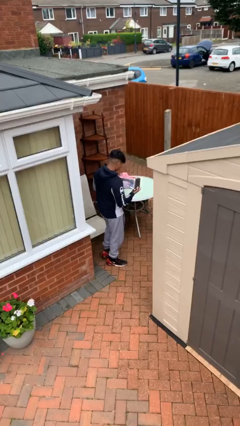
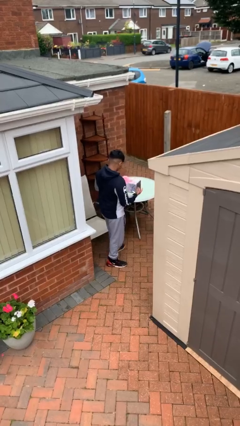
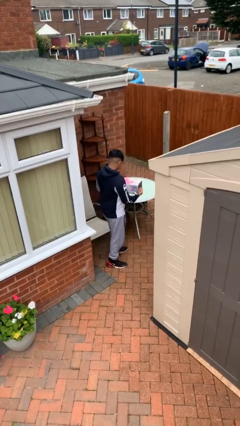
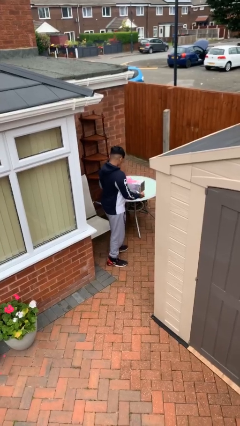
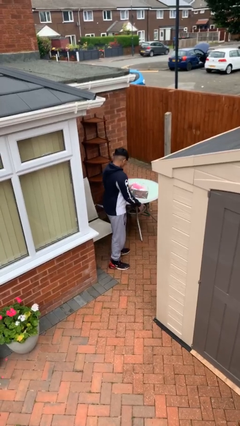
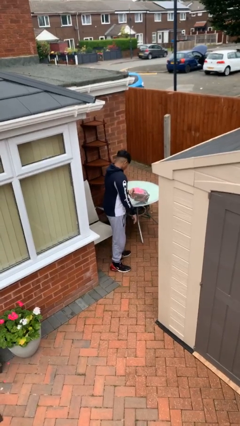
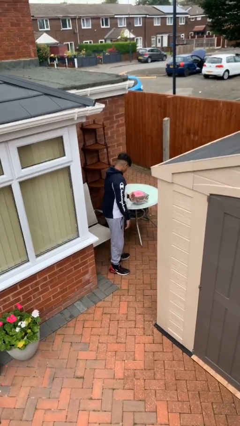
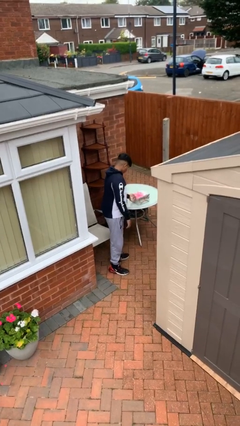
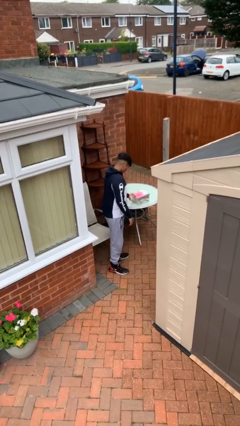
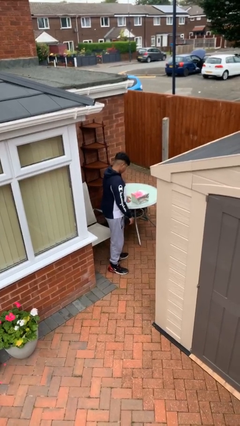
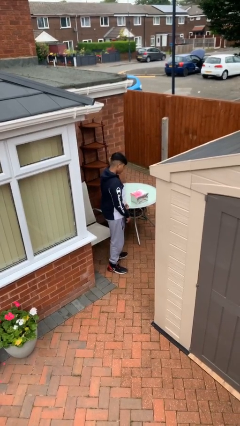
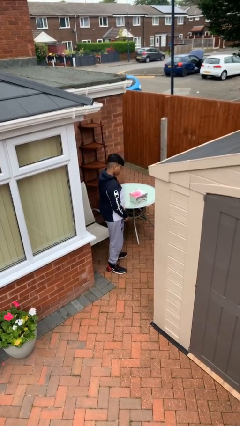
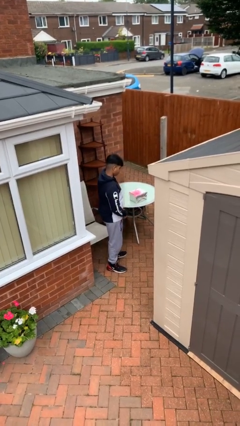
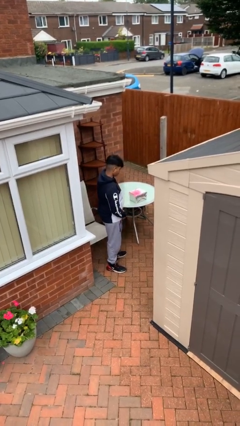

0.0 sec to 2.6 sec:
person puts down object on table

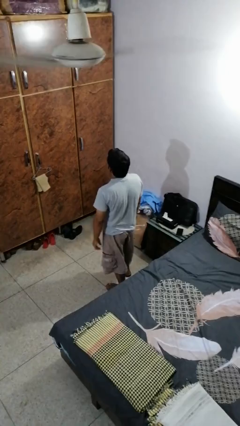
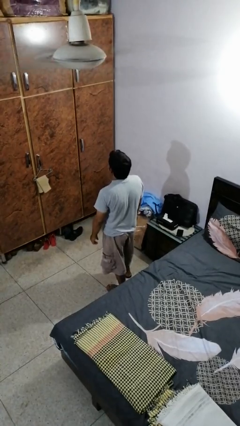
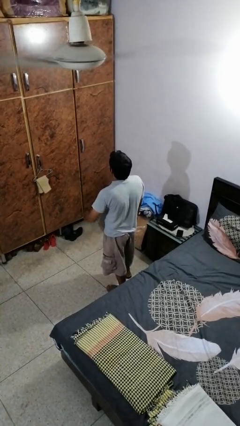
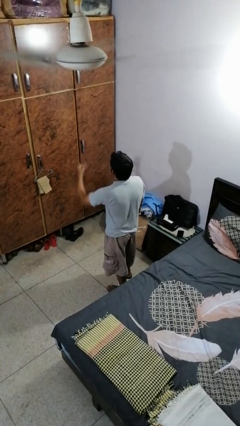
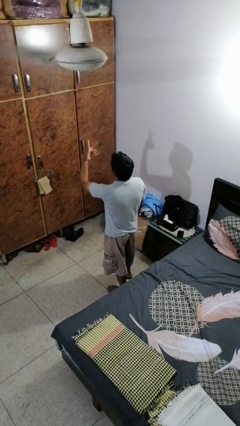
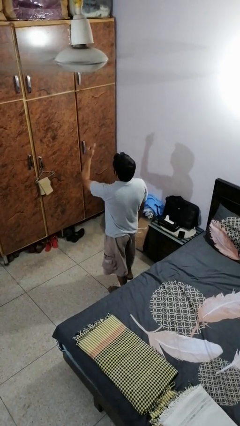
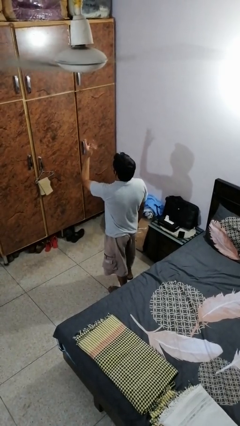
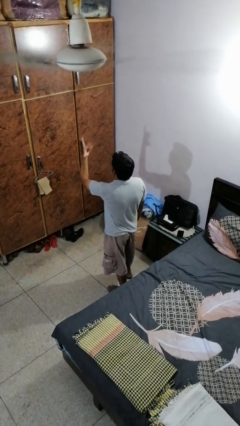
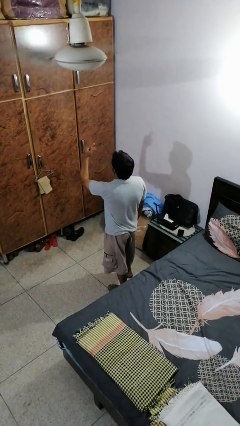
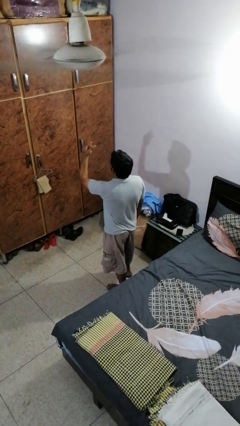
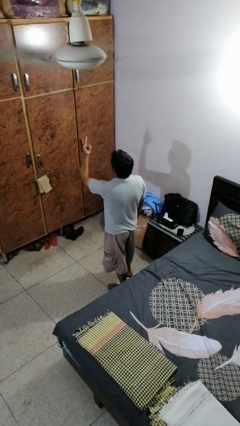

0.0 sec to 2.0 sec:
person snaps fingers

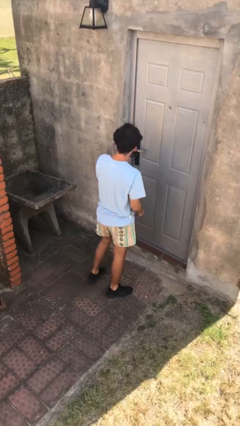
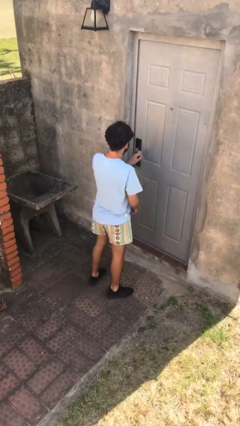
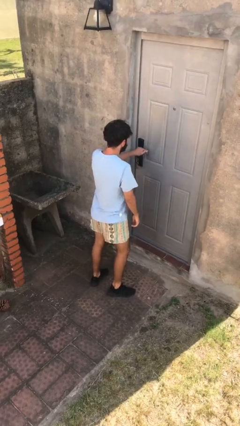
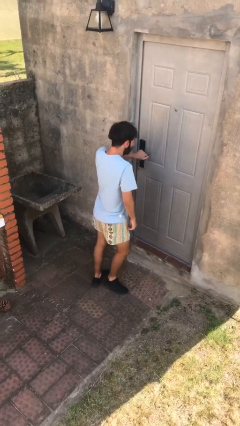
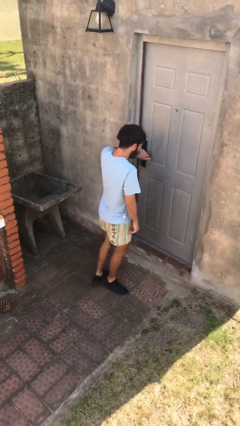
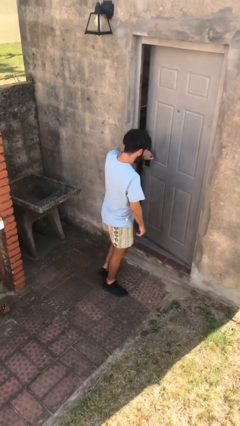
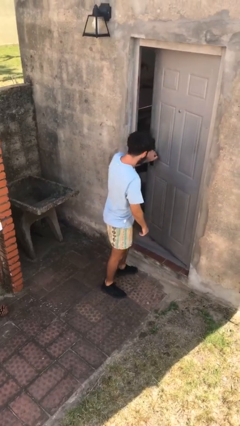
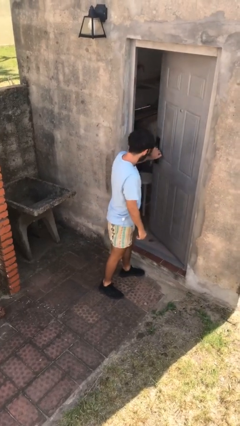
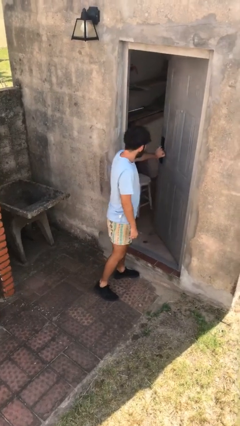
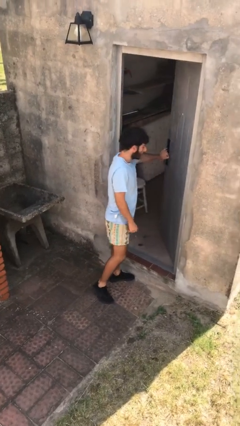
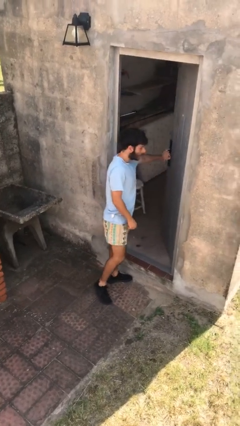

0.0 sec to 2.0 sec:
person opens facility door

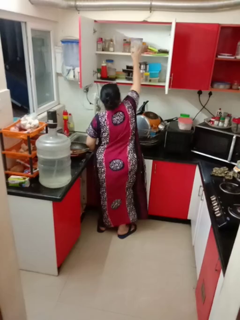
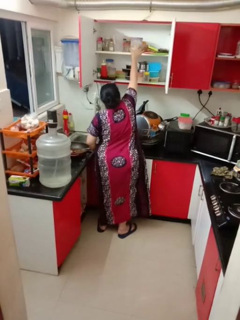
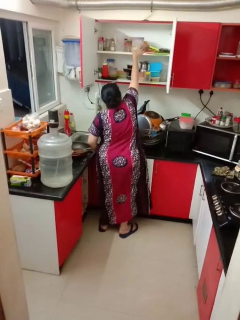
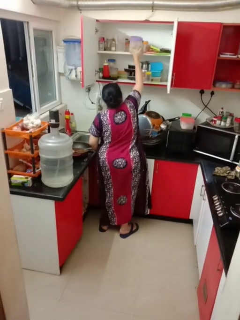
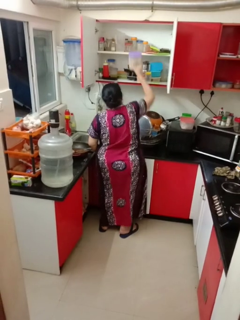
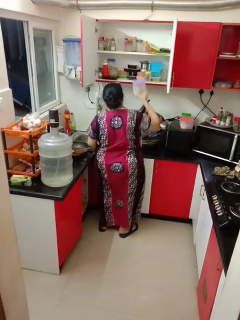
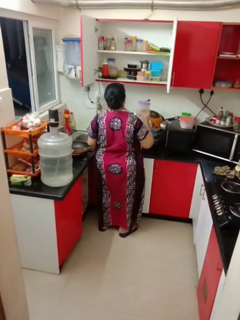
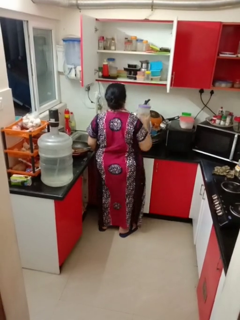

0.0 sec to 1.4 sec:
person takes object from cabinet

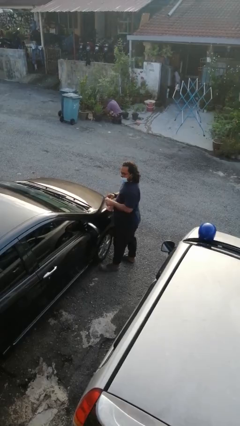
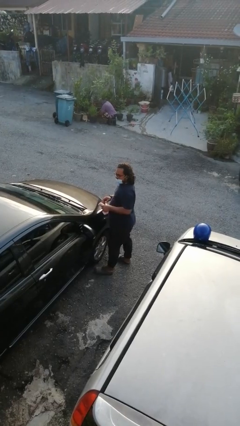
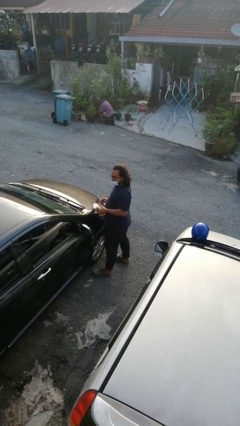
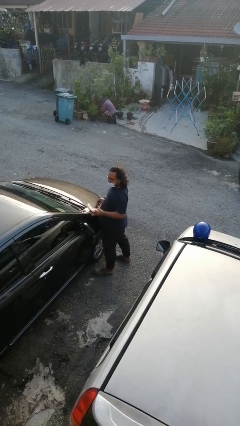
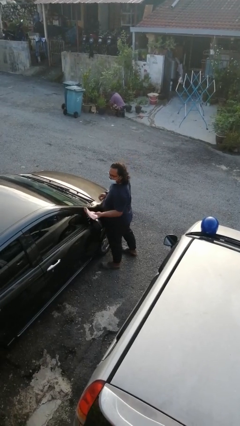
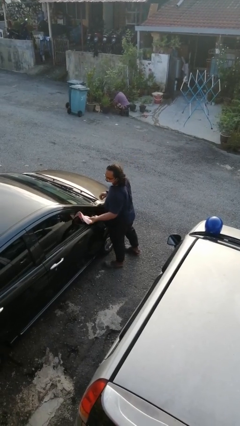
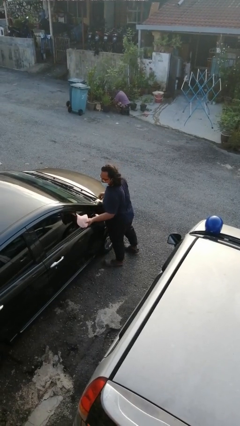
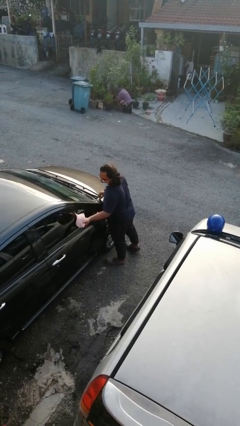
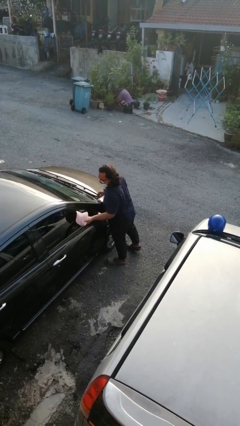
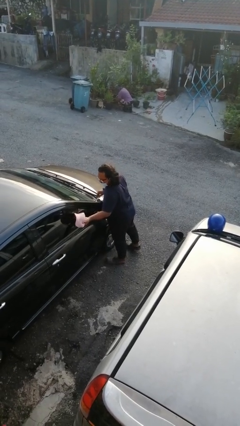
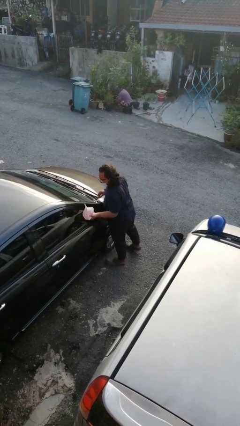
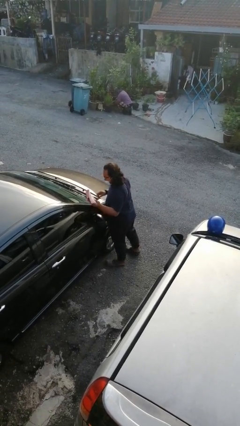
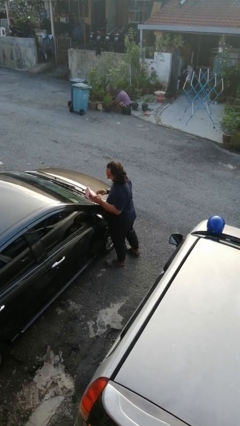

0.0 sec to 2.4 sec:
person polishes car with rag

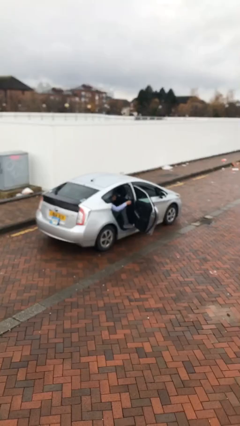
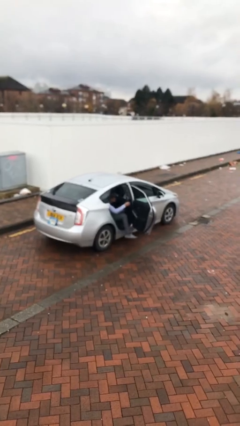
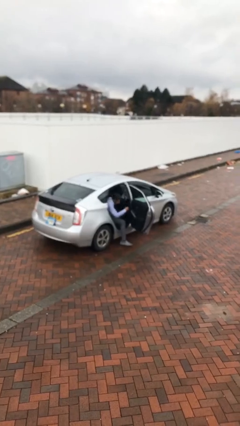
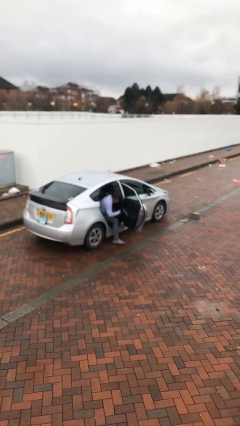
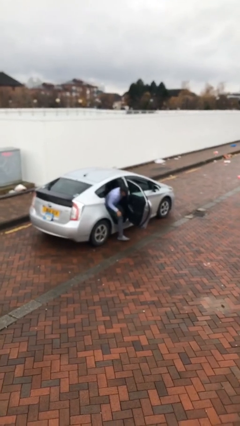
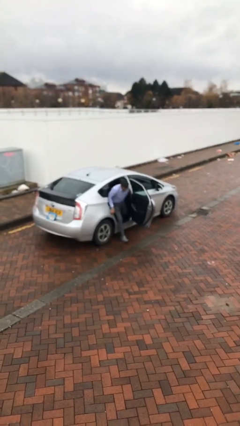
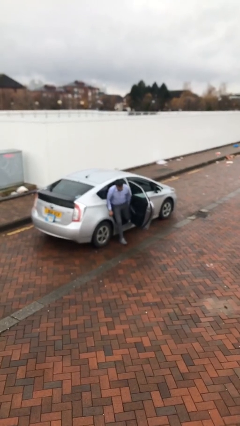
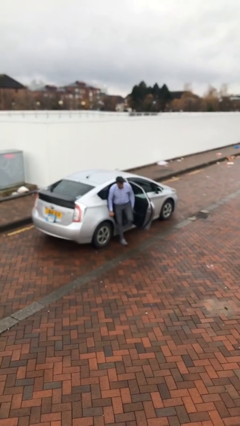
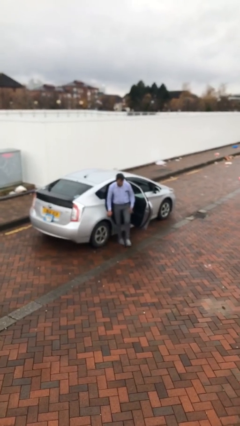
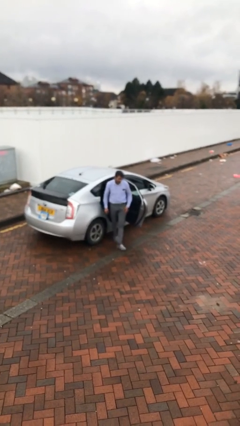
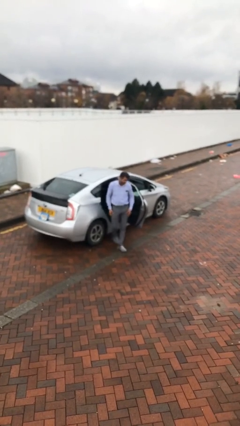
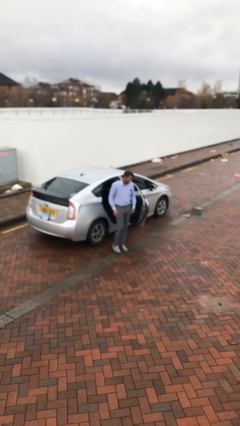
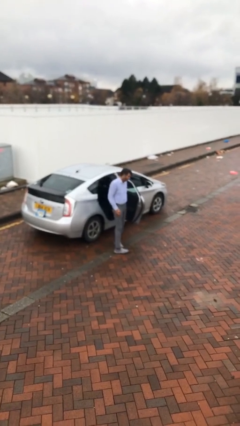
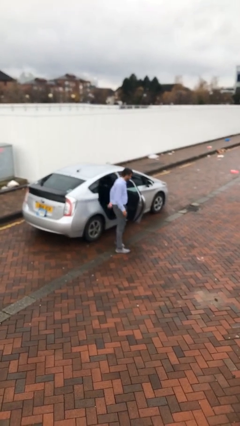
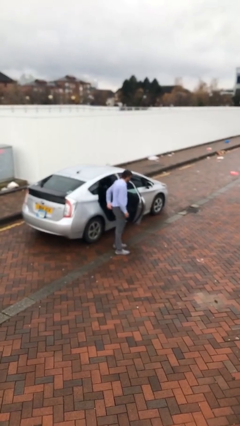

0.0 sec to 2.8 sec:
person exits car

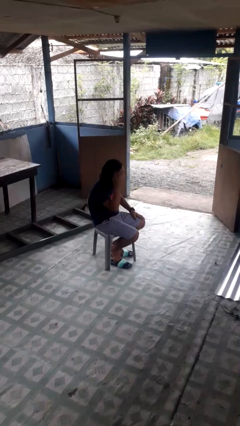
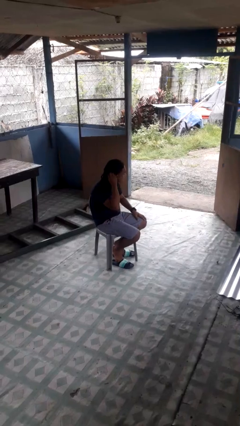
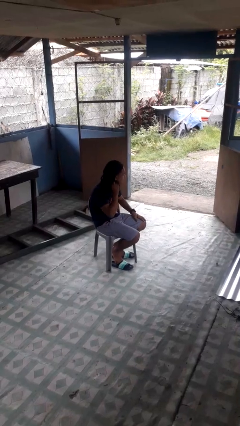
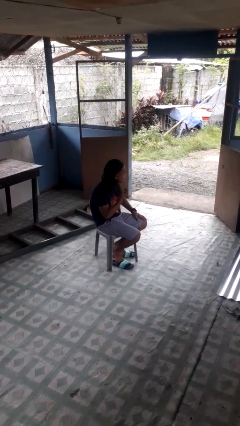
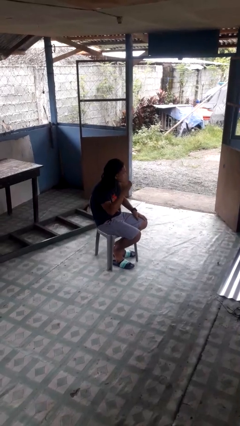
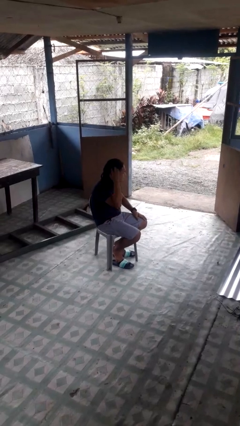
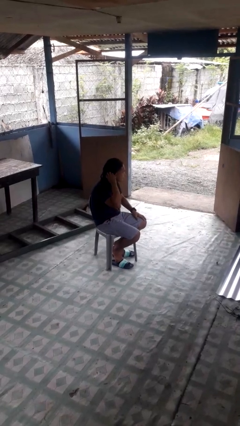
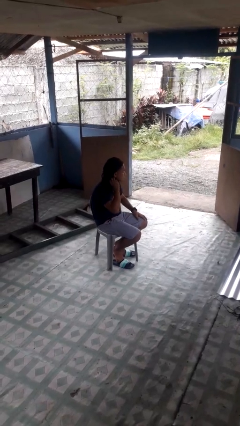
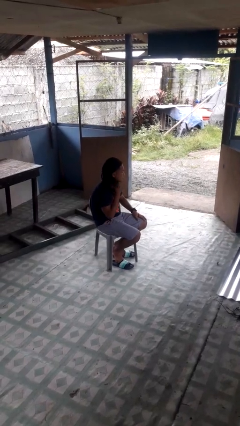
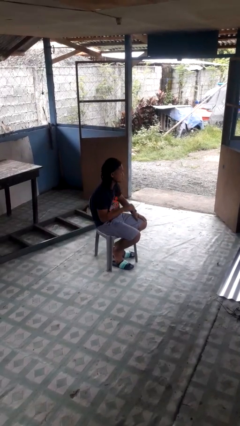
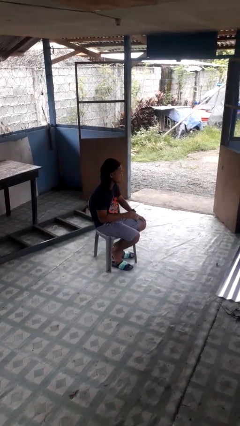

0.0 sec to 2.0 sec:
person strokes hair

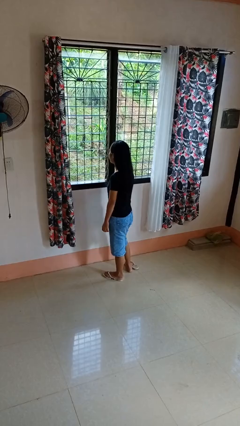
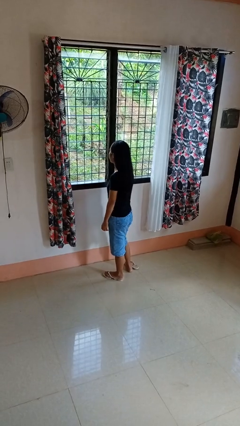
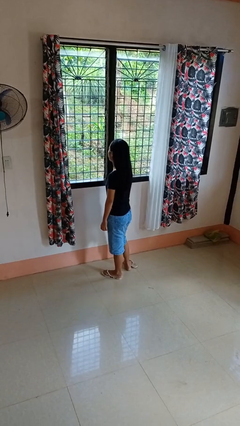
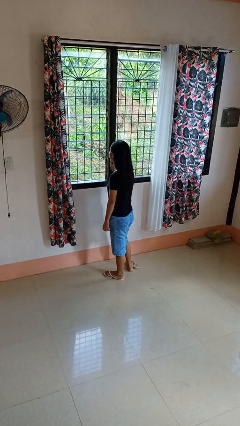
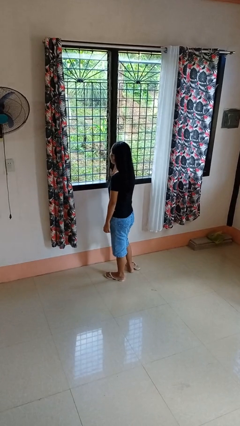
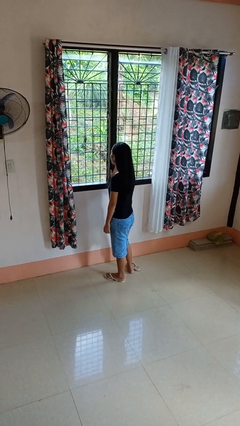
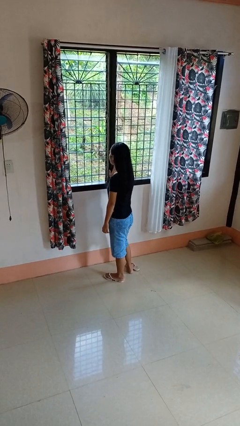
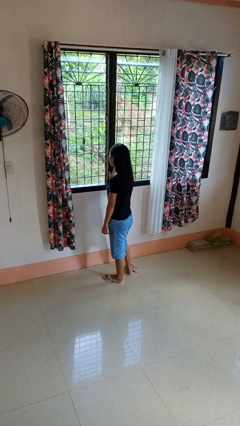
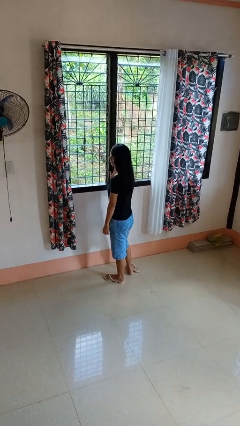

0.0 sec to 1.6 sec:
person closes home window

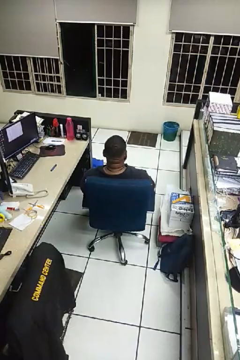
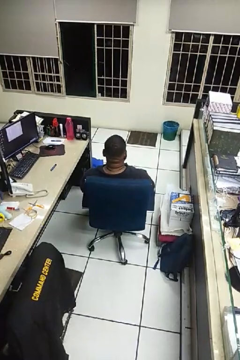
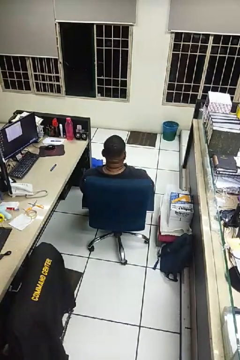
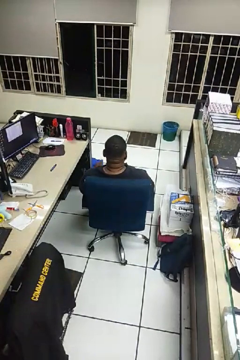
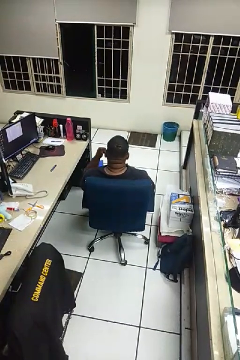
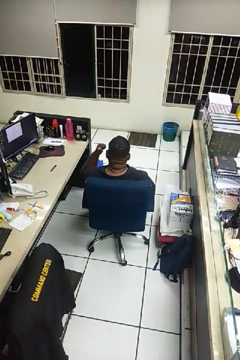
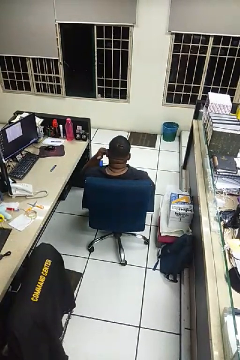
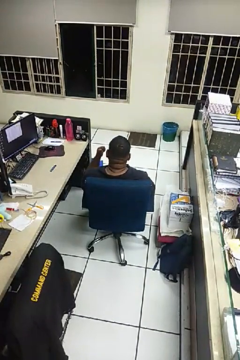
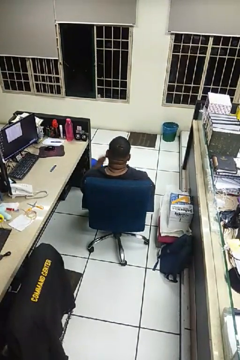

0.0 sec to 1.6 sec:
person gestures behind me
